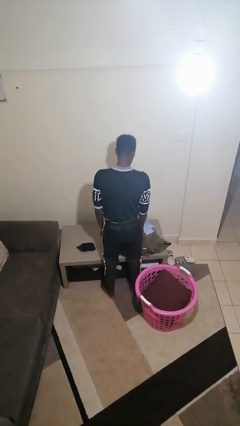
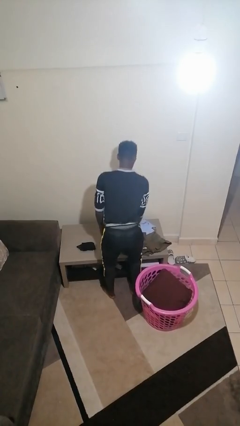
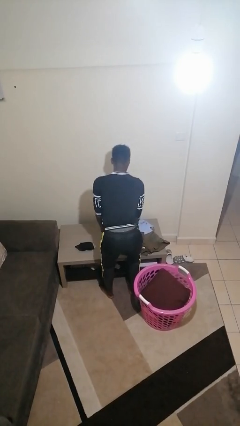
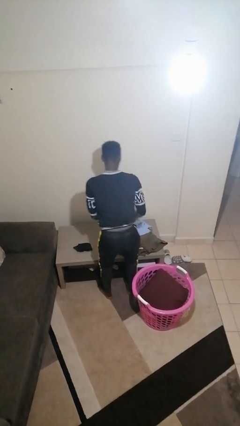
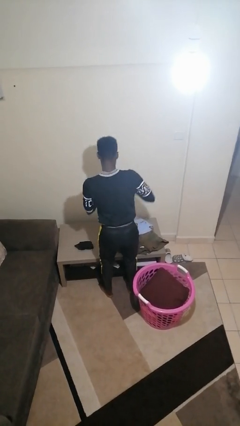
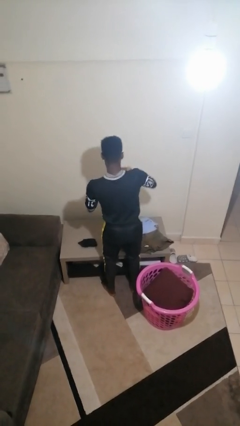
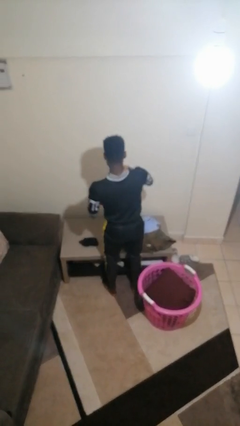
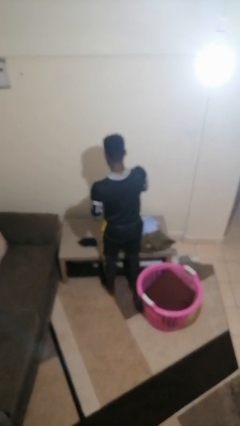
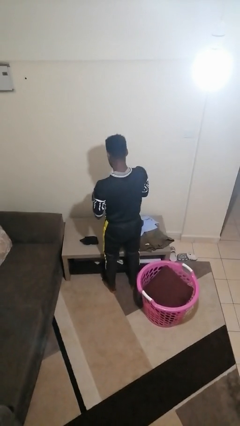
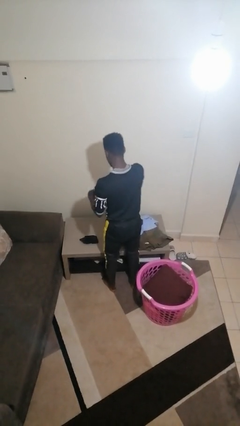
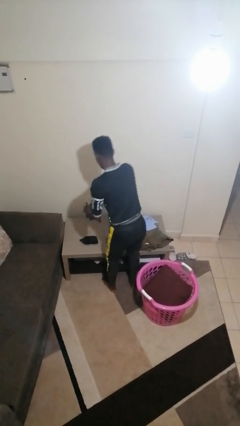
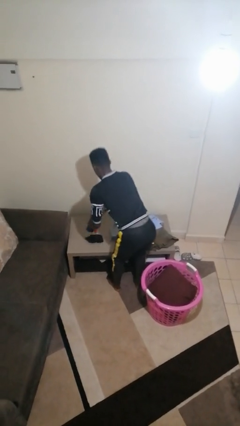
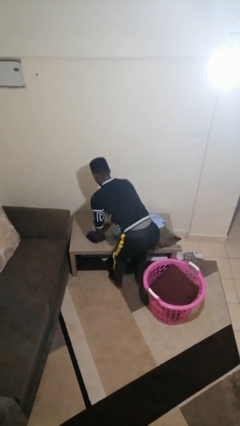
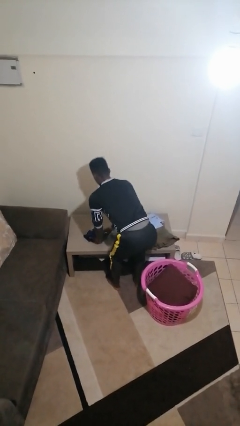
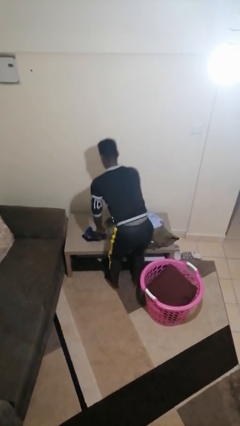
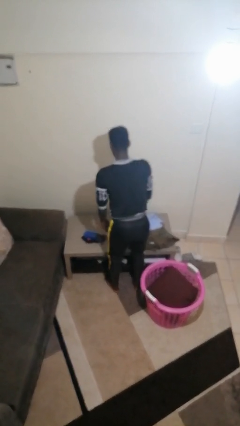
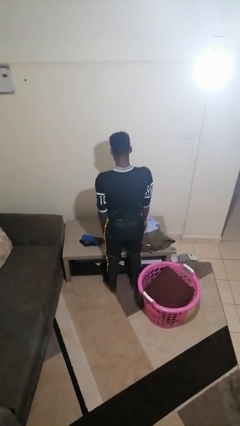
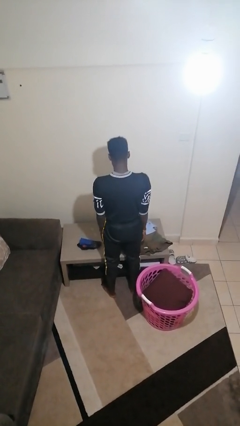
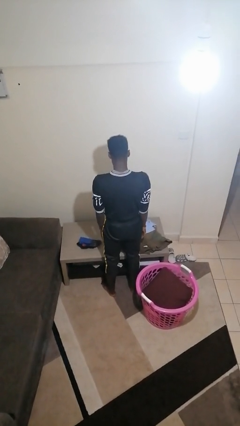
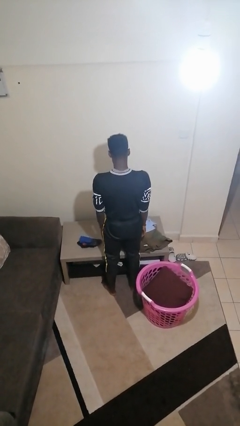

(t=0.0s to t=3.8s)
person folds socks

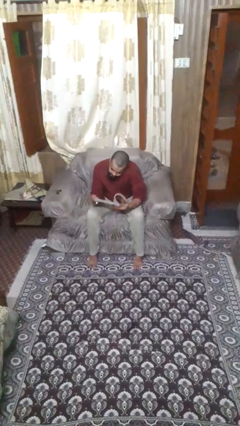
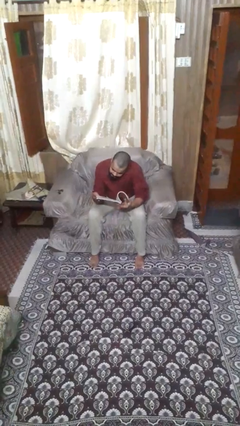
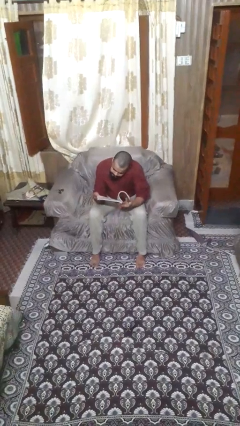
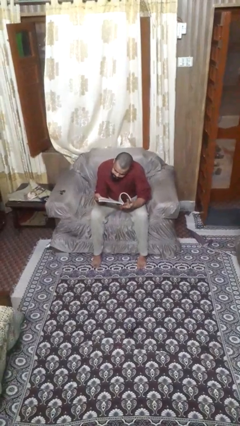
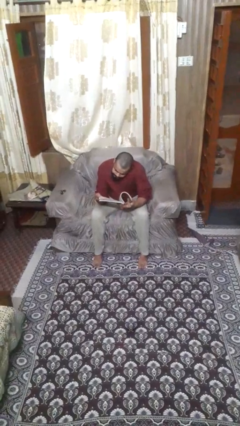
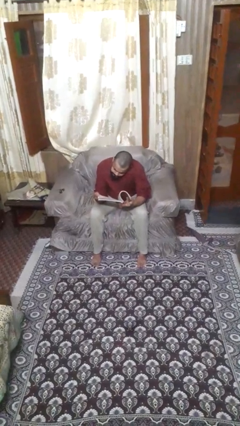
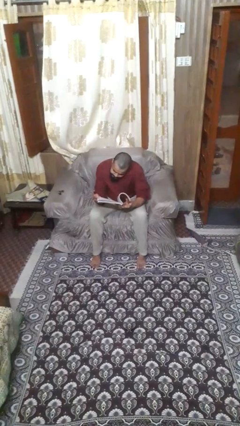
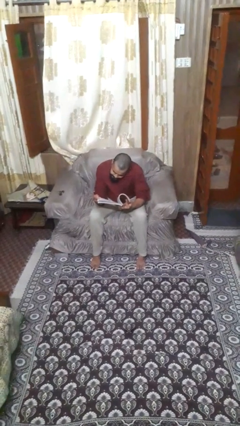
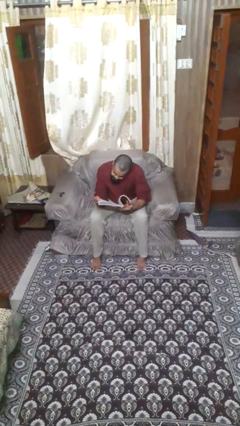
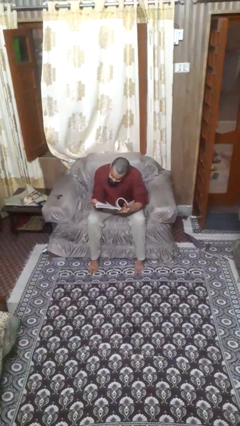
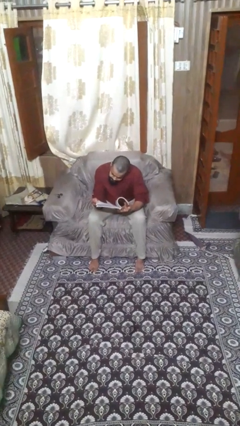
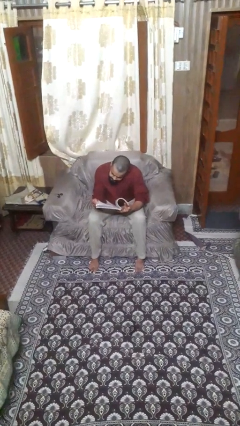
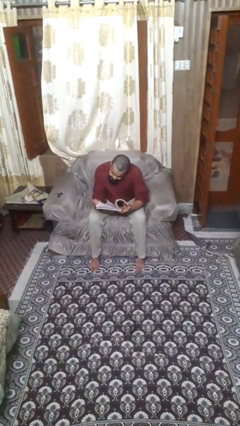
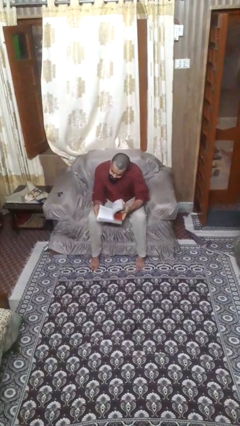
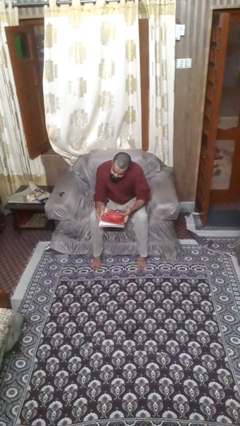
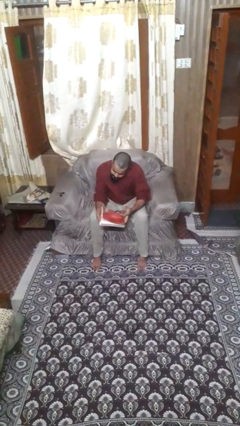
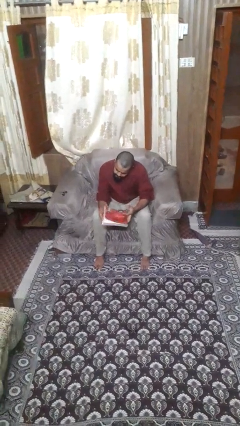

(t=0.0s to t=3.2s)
person reads book

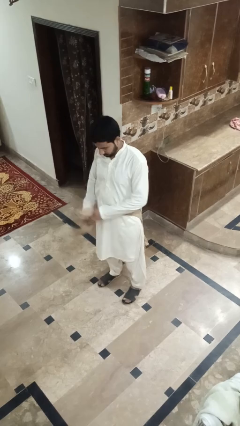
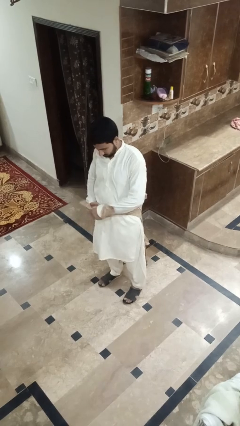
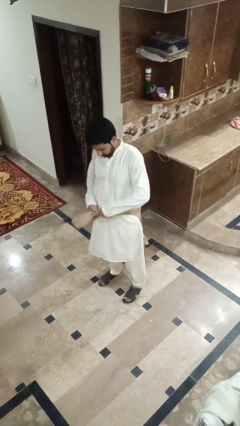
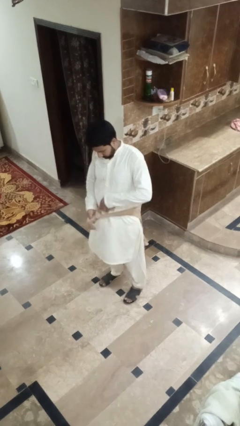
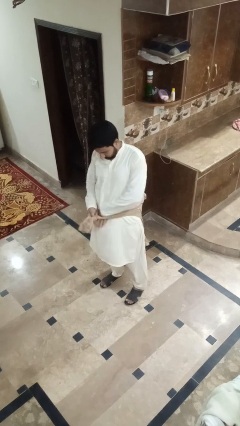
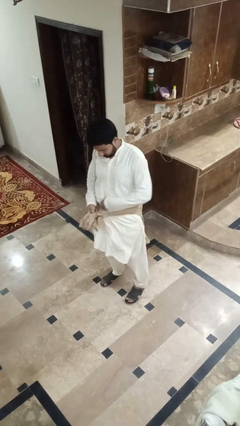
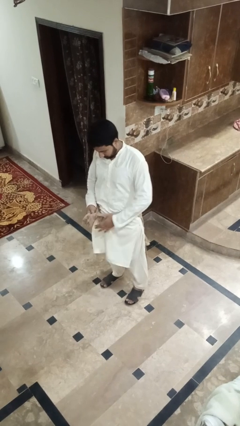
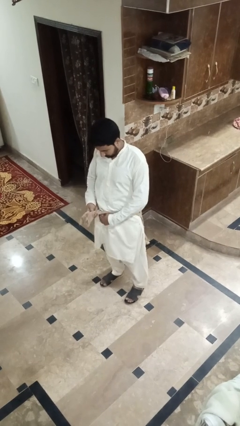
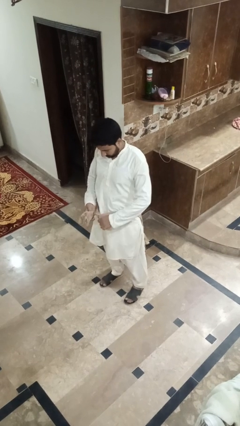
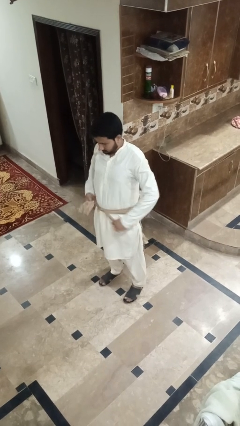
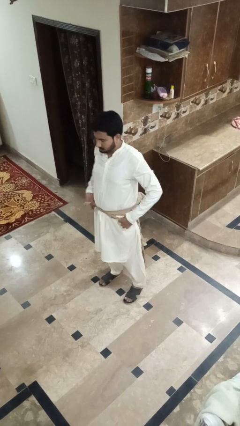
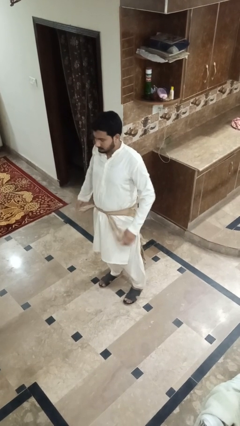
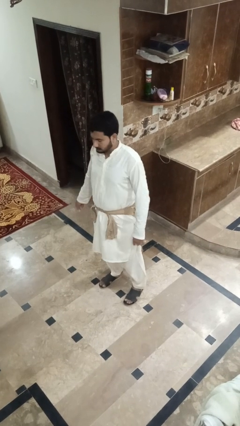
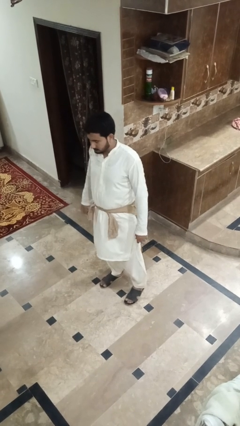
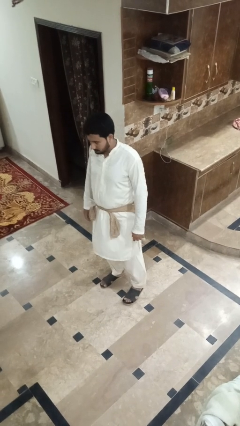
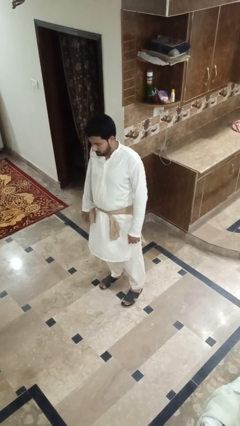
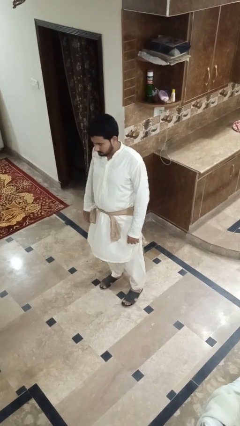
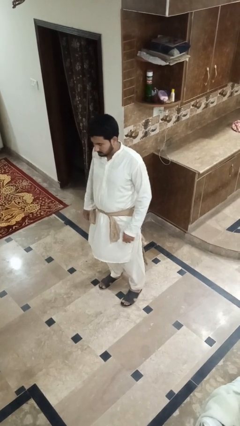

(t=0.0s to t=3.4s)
person ties jacket around waist

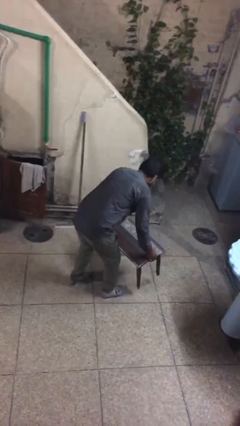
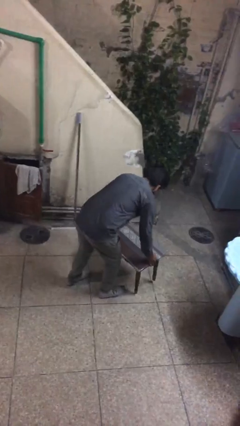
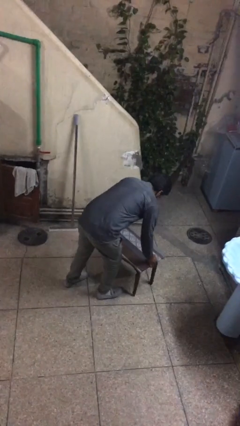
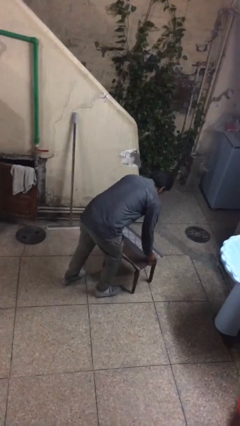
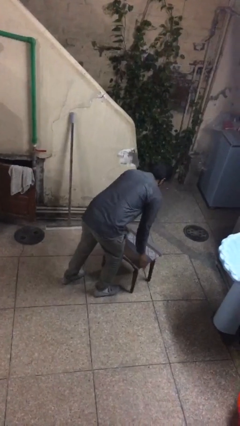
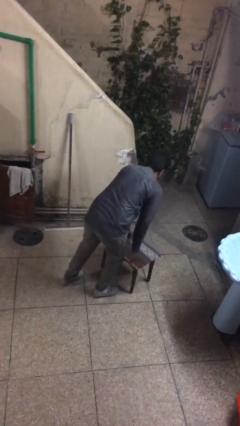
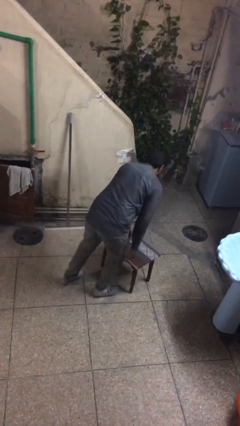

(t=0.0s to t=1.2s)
person puts down object on floor

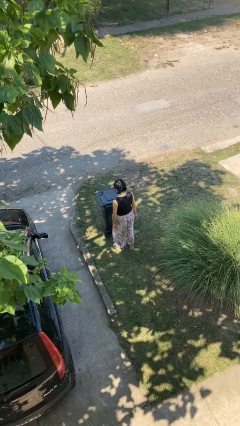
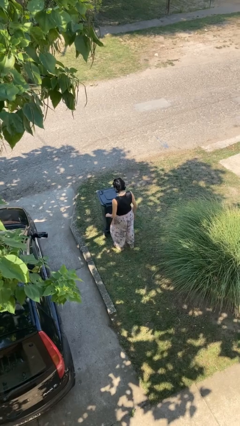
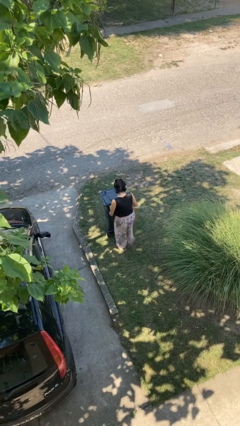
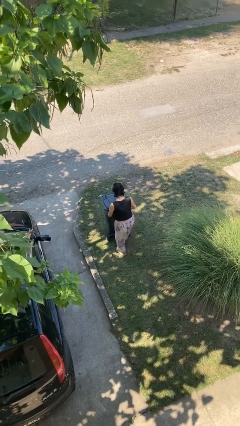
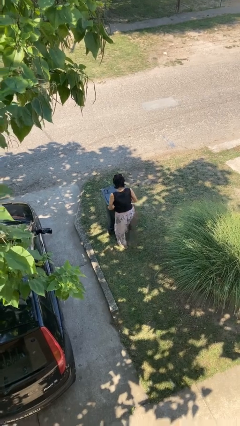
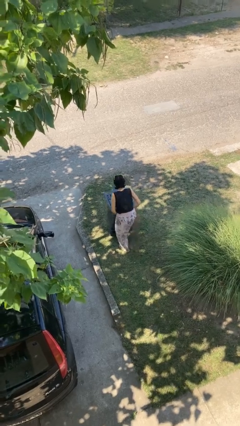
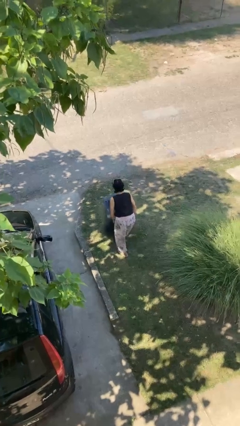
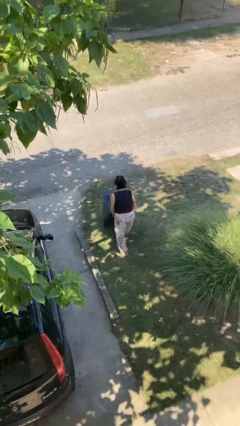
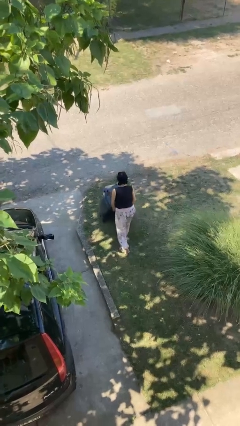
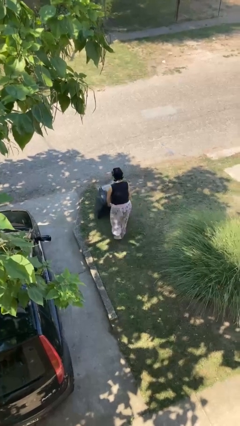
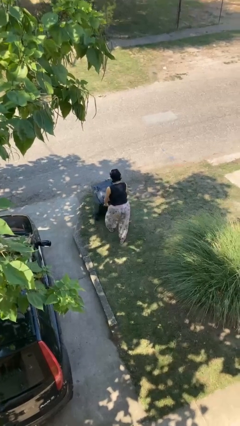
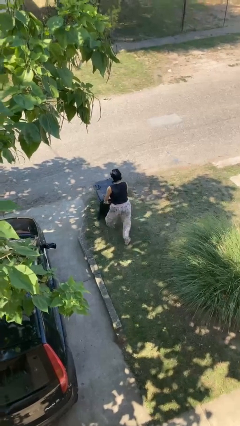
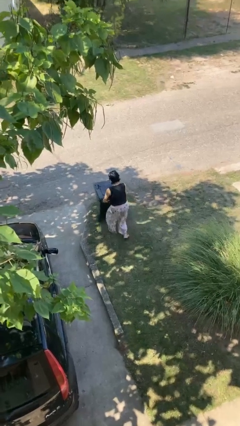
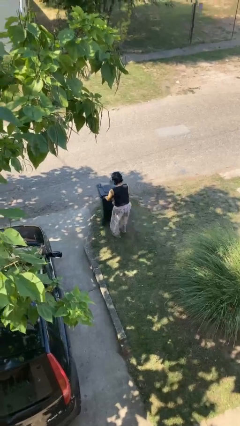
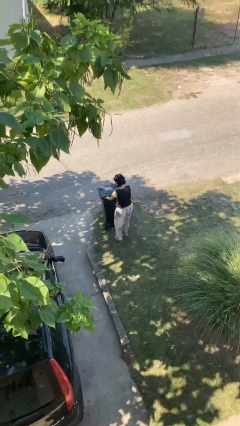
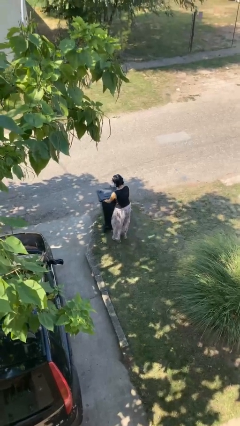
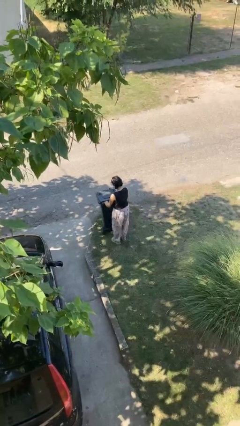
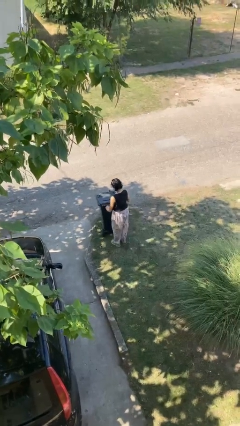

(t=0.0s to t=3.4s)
person pushes wheeled trashcan

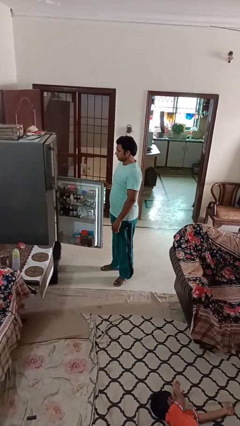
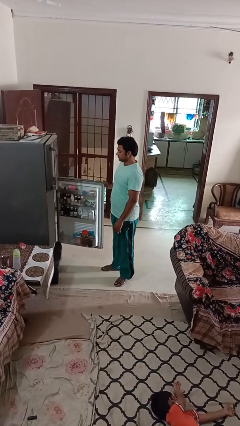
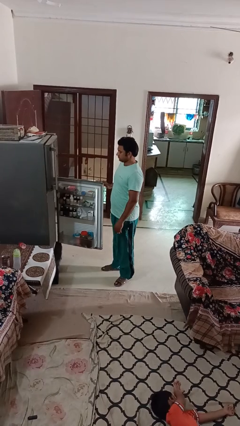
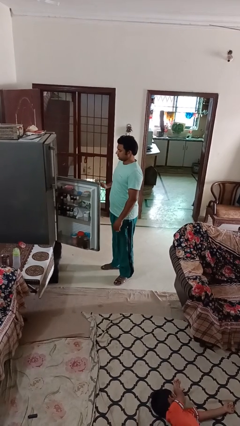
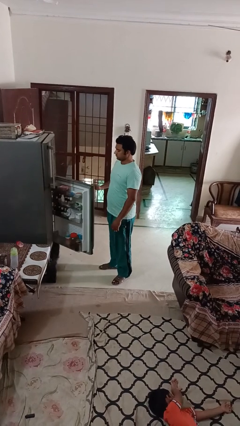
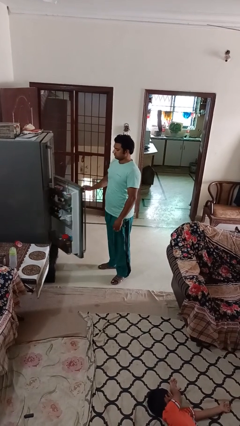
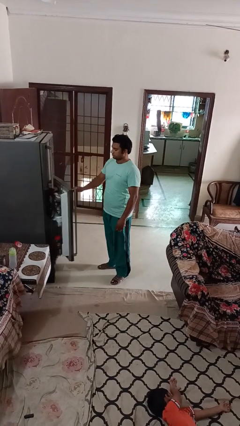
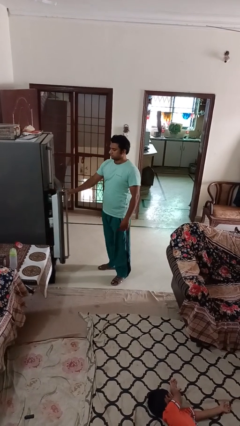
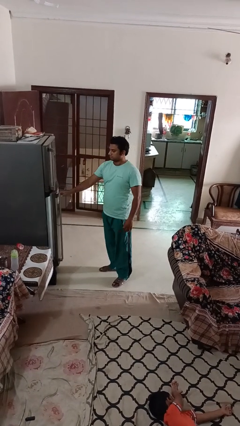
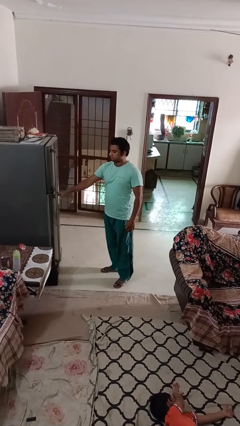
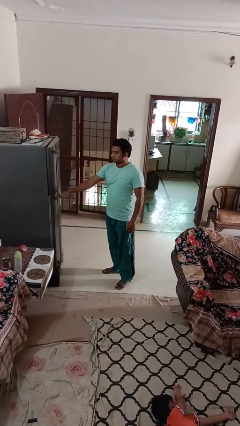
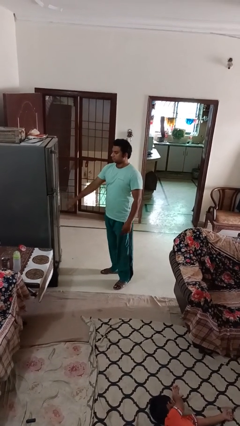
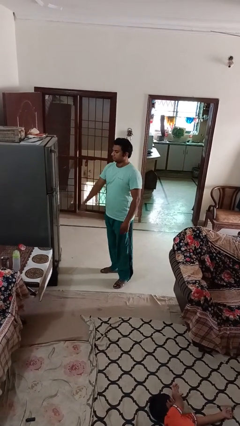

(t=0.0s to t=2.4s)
person closes refrigerator
